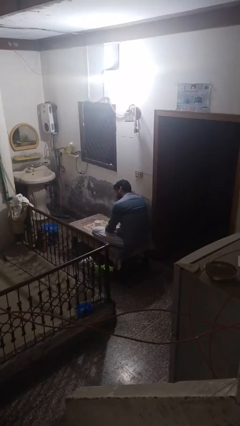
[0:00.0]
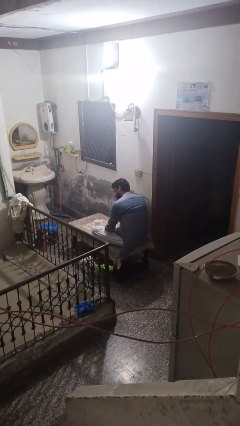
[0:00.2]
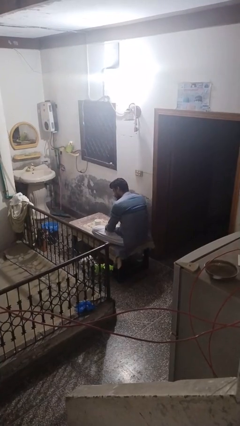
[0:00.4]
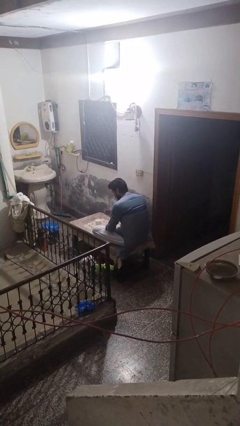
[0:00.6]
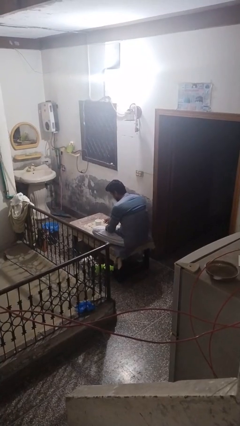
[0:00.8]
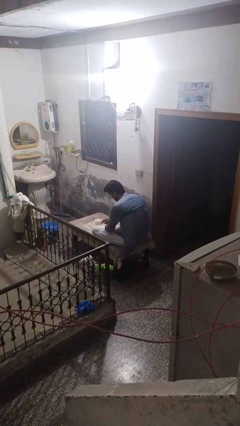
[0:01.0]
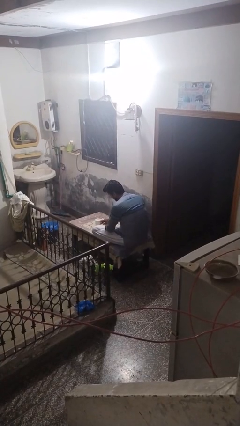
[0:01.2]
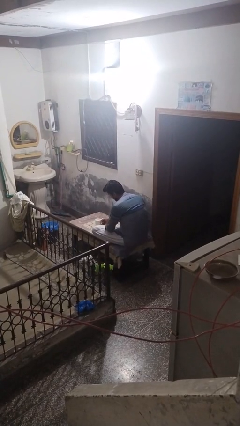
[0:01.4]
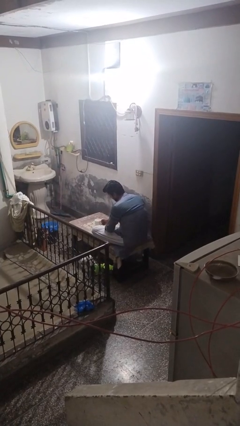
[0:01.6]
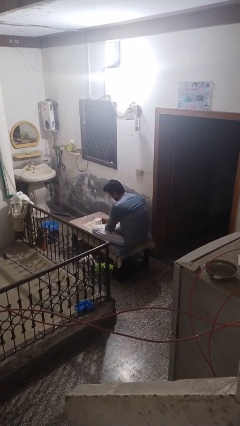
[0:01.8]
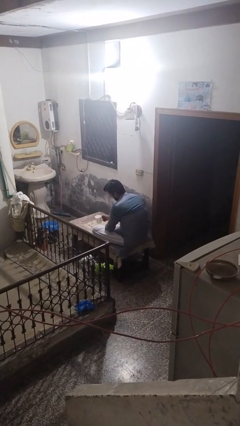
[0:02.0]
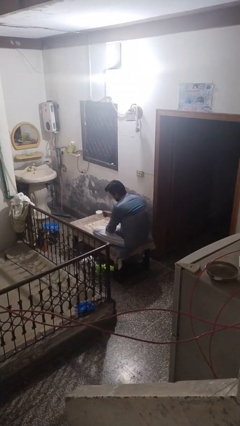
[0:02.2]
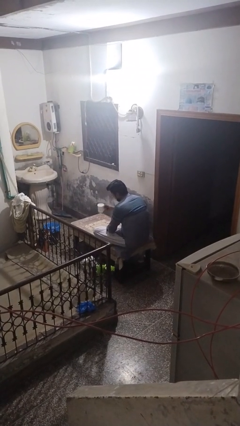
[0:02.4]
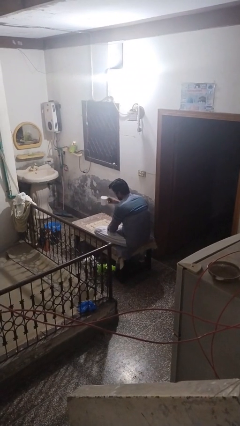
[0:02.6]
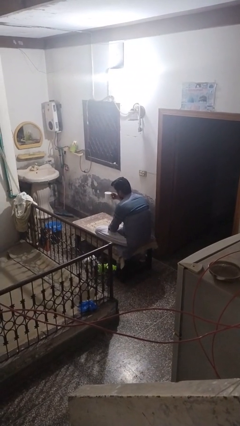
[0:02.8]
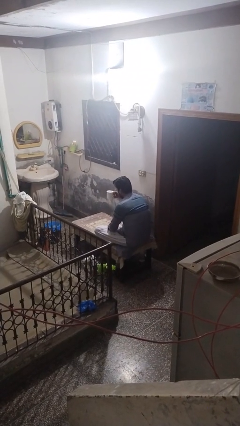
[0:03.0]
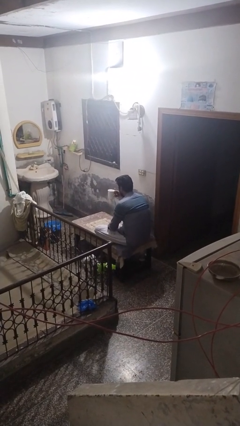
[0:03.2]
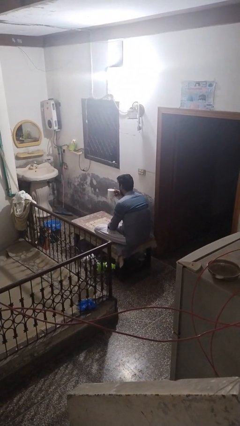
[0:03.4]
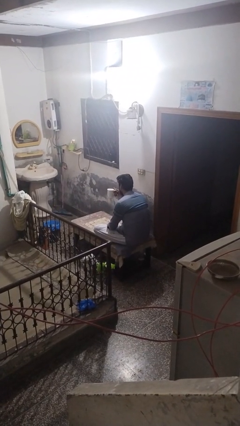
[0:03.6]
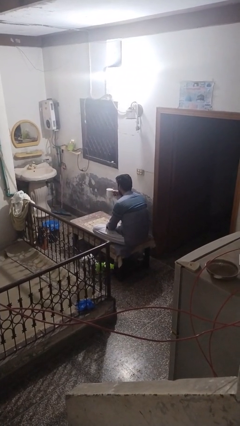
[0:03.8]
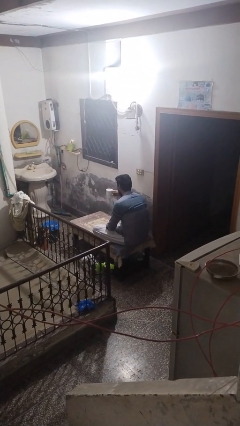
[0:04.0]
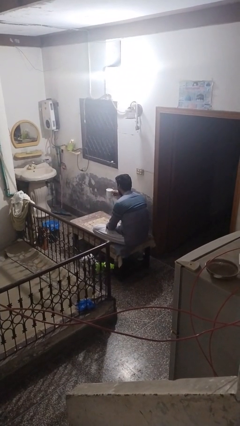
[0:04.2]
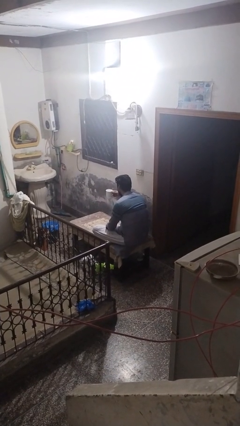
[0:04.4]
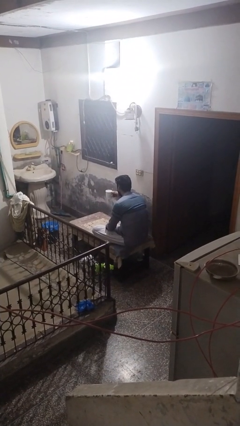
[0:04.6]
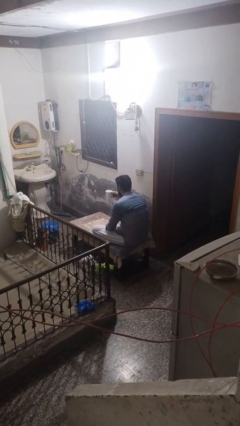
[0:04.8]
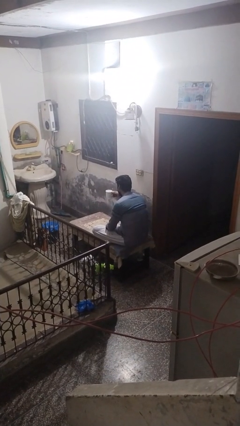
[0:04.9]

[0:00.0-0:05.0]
person picks up object from table

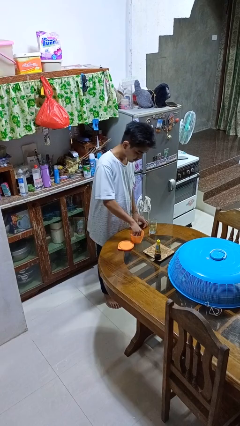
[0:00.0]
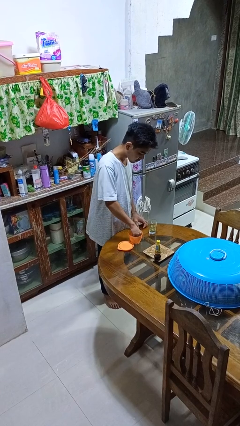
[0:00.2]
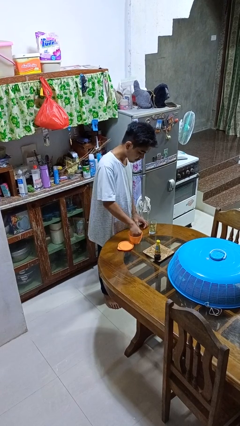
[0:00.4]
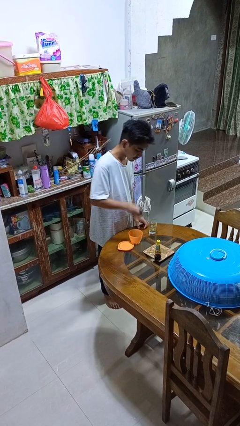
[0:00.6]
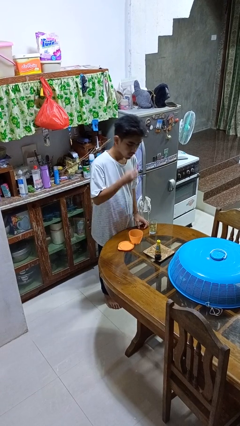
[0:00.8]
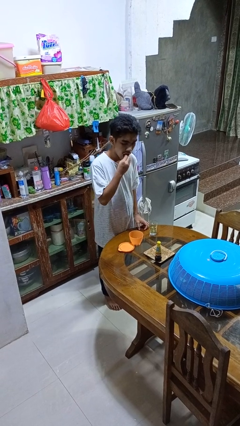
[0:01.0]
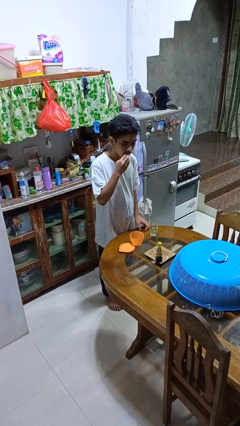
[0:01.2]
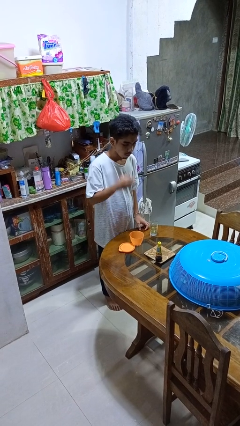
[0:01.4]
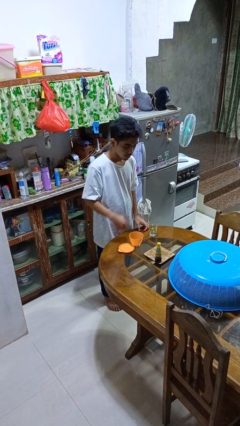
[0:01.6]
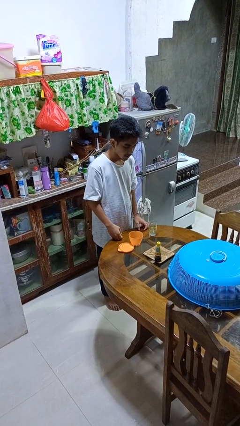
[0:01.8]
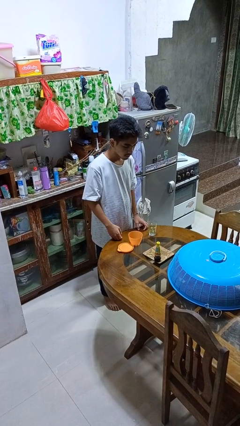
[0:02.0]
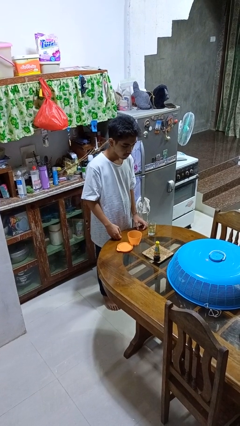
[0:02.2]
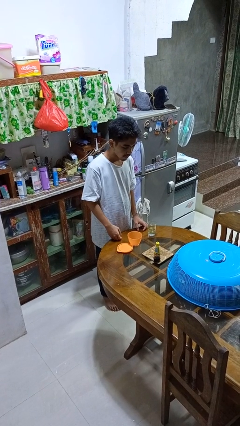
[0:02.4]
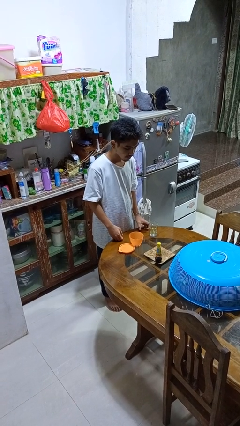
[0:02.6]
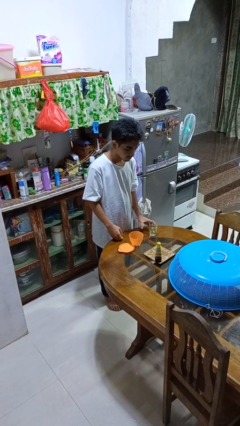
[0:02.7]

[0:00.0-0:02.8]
person takes medicine pills

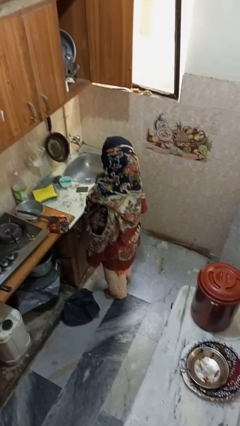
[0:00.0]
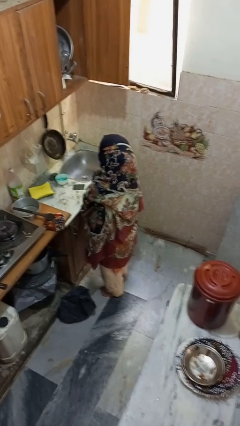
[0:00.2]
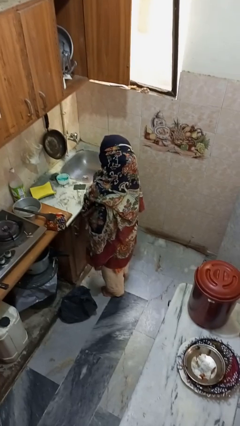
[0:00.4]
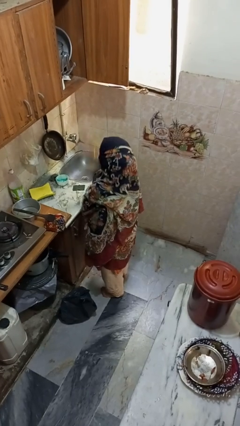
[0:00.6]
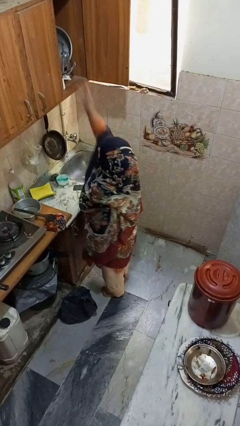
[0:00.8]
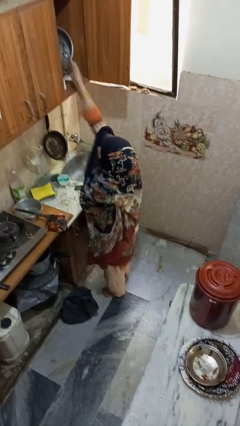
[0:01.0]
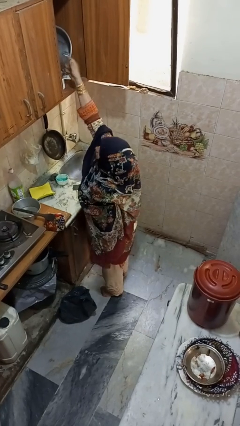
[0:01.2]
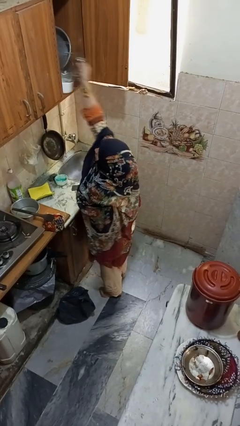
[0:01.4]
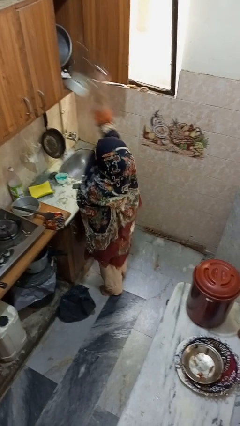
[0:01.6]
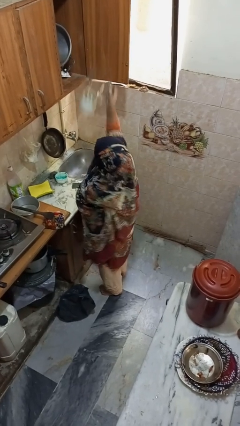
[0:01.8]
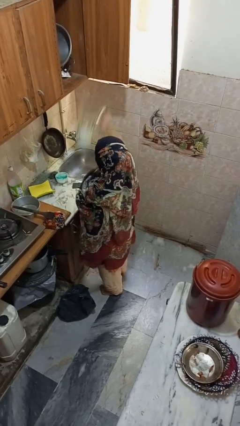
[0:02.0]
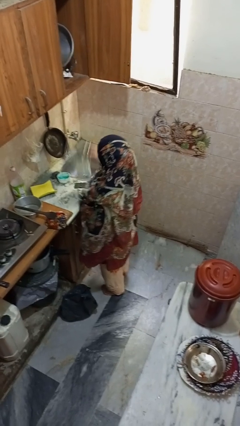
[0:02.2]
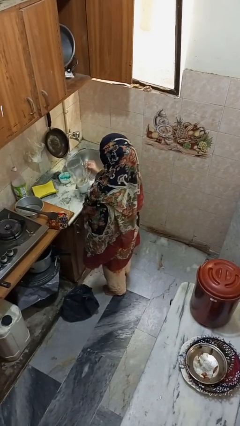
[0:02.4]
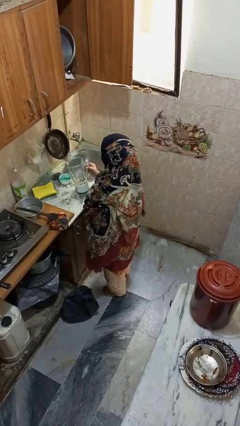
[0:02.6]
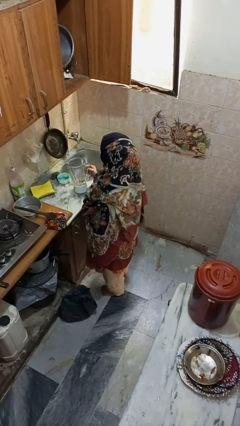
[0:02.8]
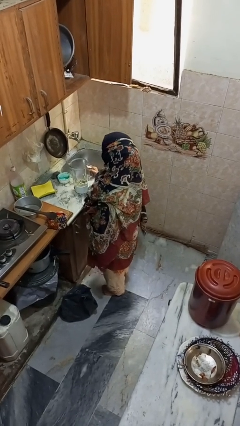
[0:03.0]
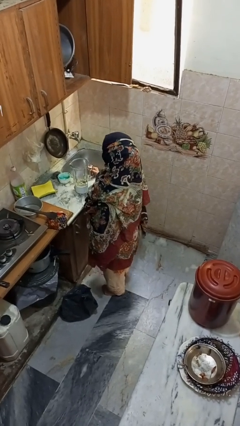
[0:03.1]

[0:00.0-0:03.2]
person puts object in cabinet

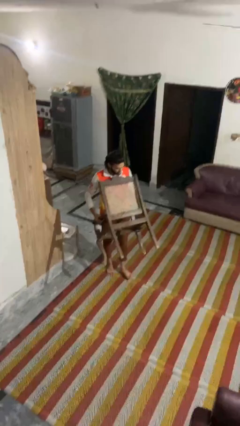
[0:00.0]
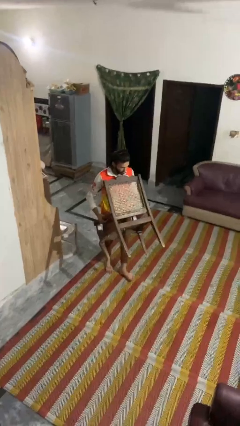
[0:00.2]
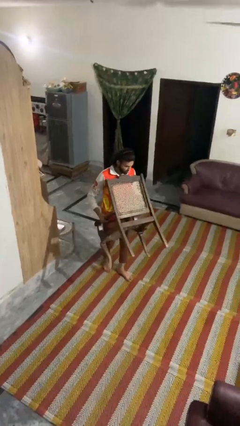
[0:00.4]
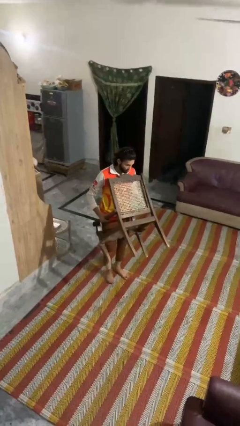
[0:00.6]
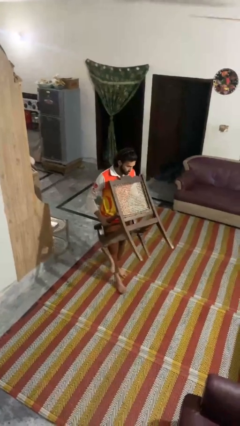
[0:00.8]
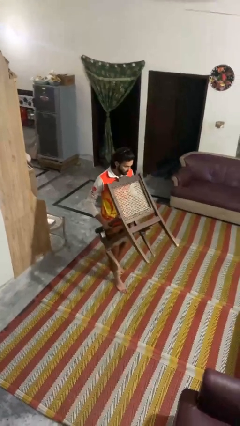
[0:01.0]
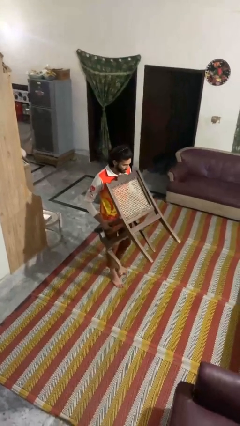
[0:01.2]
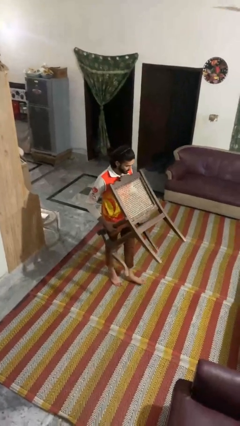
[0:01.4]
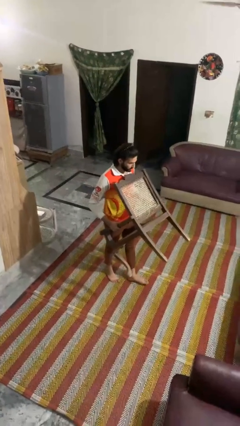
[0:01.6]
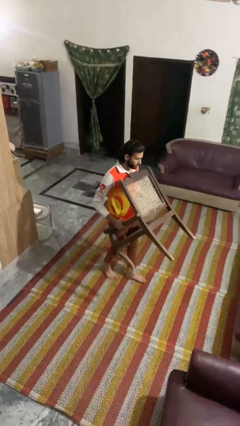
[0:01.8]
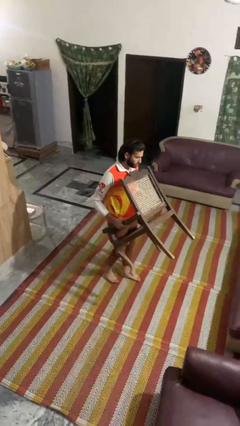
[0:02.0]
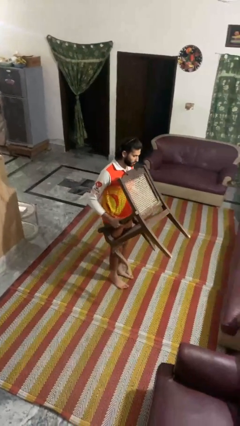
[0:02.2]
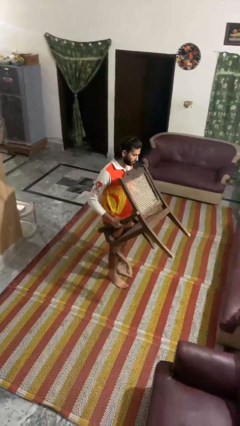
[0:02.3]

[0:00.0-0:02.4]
person carries furniture

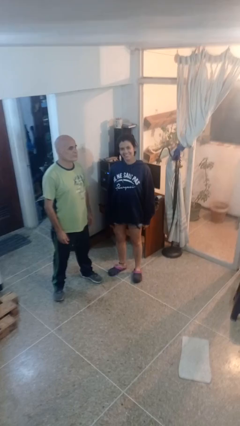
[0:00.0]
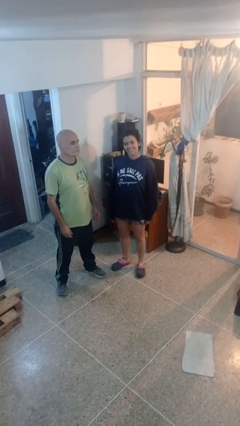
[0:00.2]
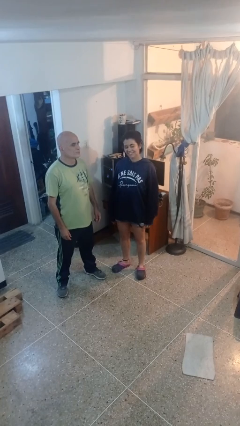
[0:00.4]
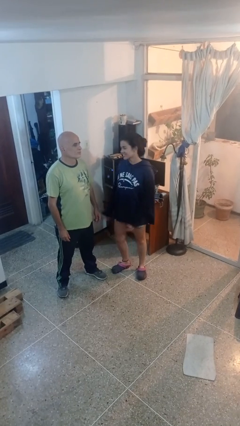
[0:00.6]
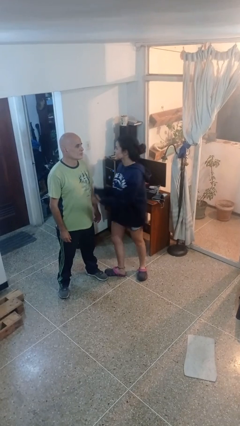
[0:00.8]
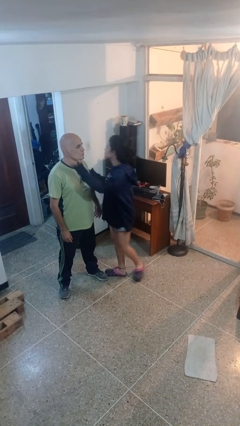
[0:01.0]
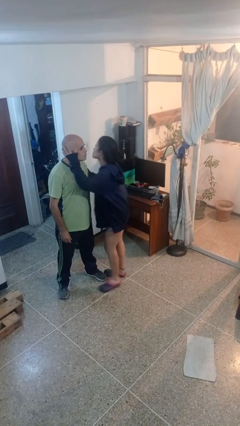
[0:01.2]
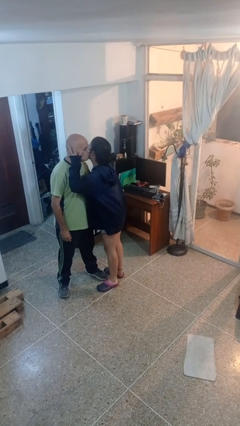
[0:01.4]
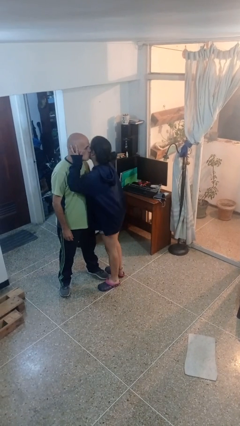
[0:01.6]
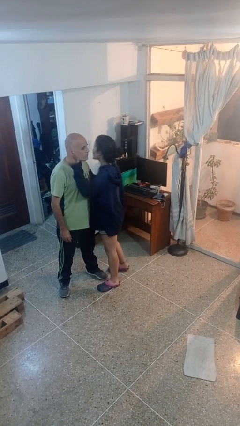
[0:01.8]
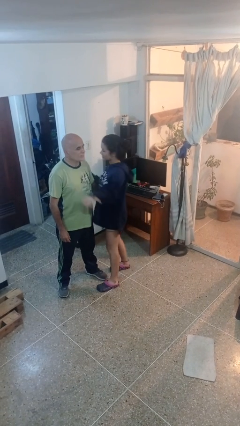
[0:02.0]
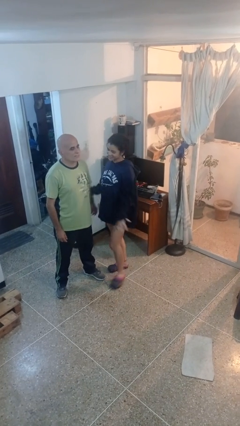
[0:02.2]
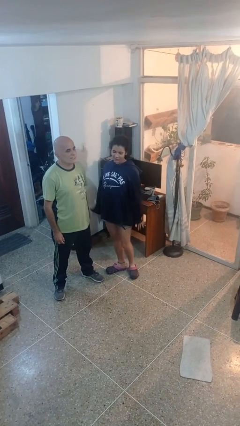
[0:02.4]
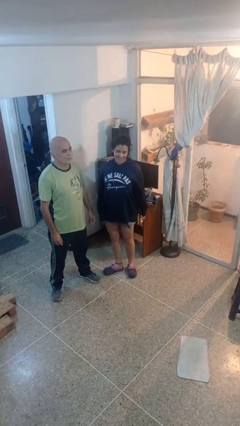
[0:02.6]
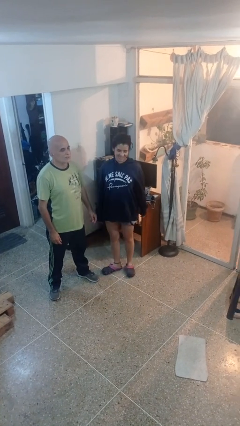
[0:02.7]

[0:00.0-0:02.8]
person kisses cheek of person

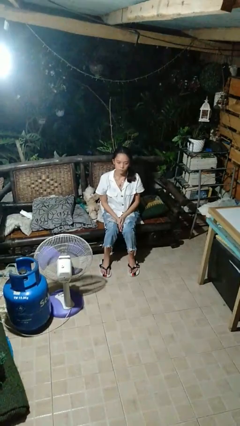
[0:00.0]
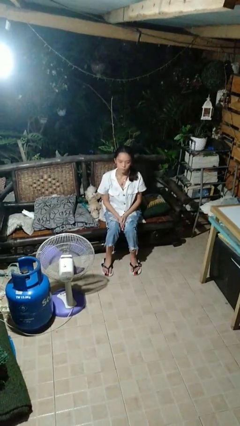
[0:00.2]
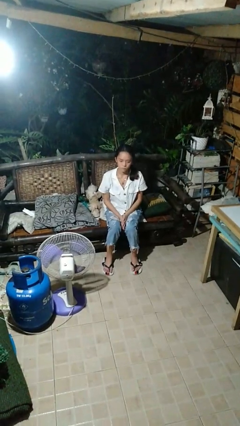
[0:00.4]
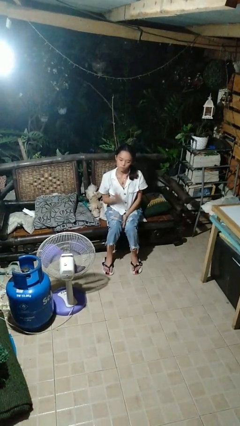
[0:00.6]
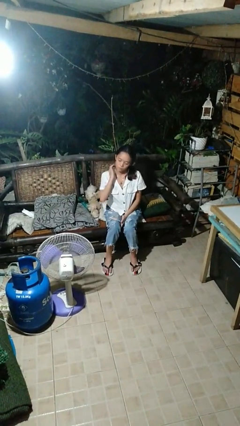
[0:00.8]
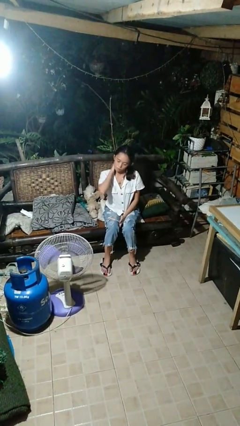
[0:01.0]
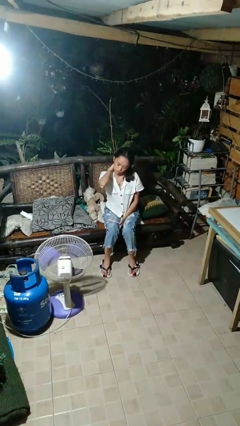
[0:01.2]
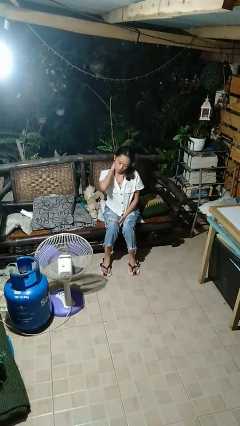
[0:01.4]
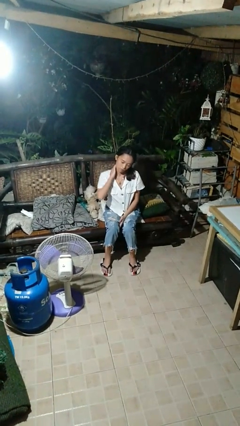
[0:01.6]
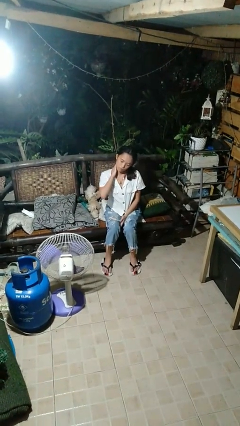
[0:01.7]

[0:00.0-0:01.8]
person rubs neck
